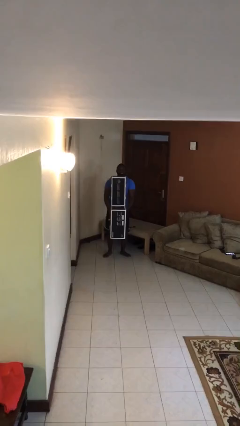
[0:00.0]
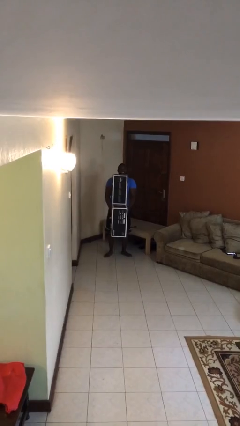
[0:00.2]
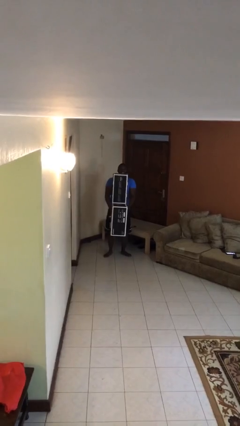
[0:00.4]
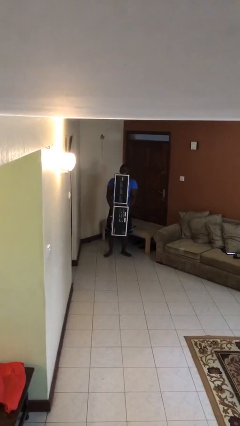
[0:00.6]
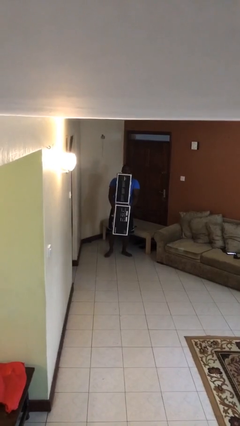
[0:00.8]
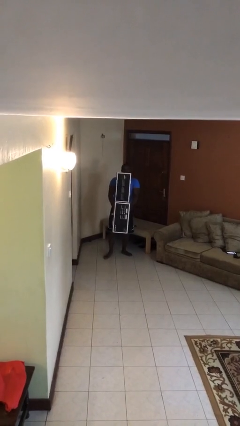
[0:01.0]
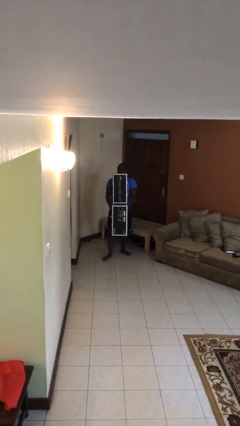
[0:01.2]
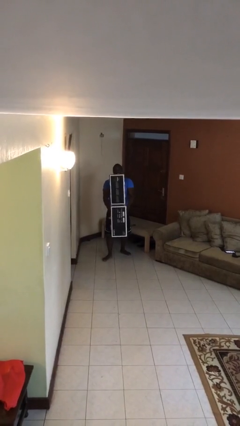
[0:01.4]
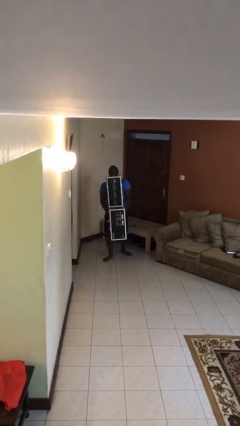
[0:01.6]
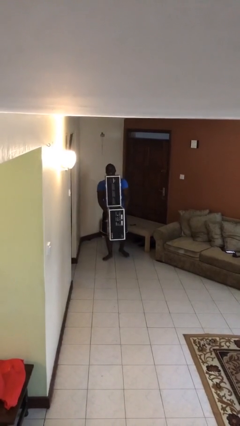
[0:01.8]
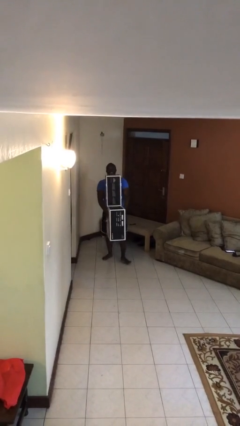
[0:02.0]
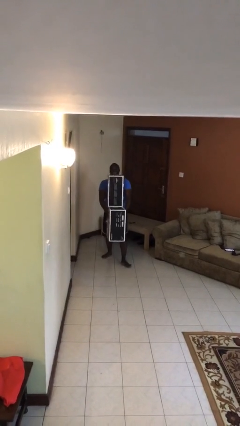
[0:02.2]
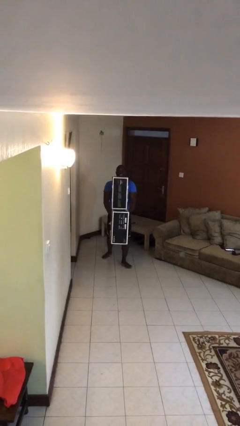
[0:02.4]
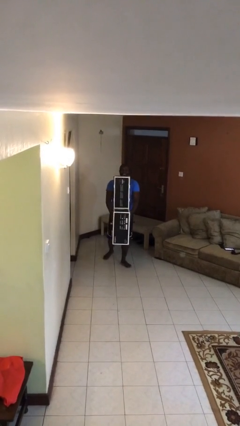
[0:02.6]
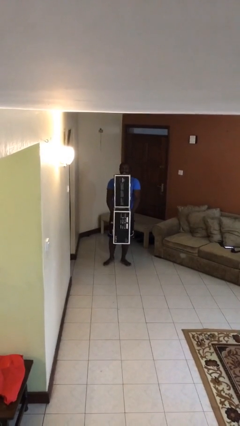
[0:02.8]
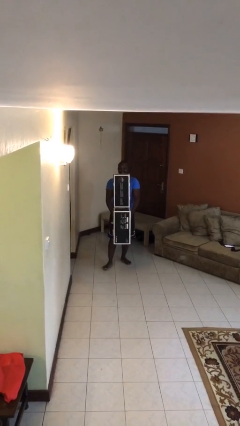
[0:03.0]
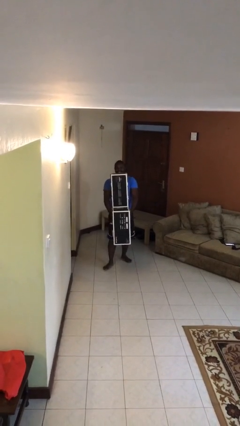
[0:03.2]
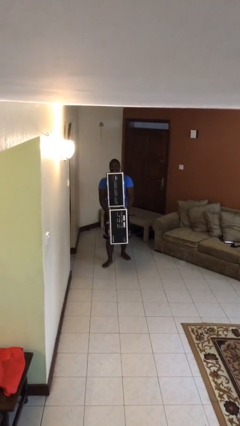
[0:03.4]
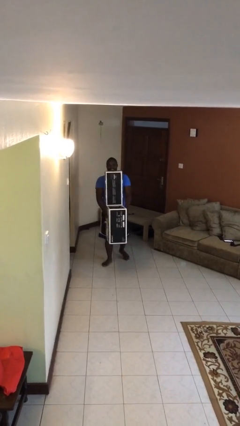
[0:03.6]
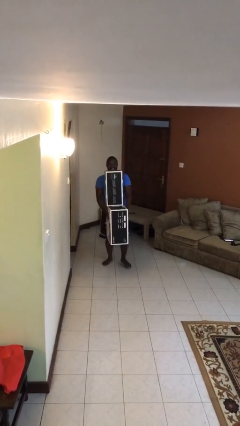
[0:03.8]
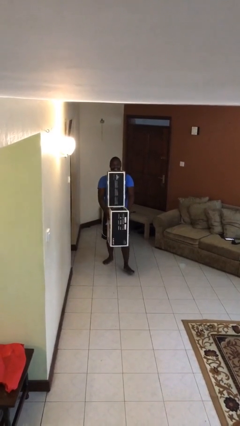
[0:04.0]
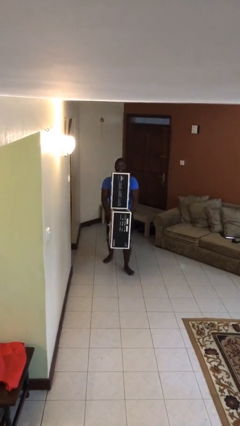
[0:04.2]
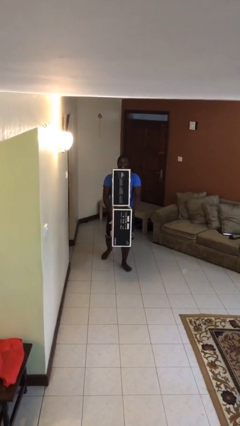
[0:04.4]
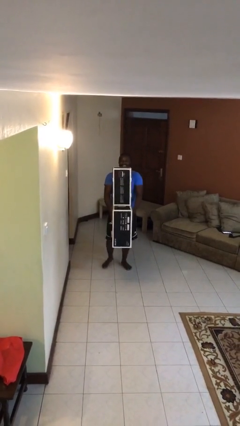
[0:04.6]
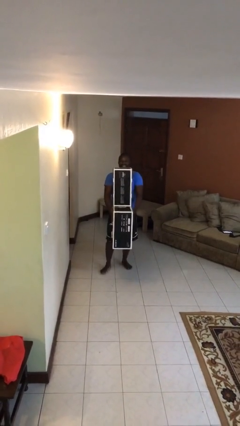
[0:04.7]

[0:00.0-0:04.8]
person carries heavy object

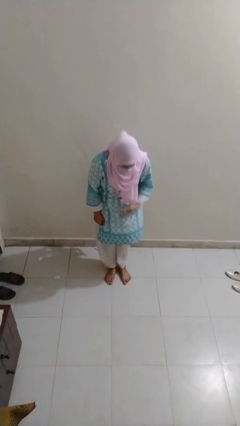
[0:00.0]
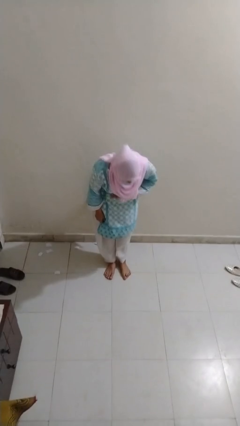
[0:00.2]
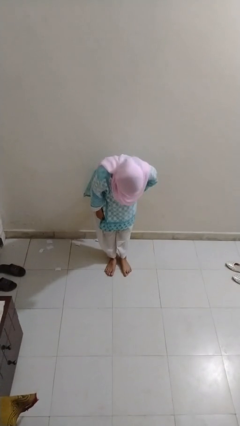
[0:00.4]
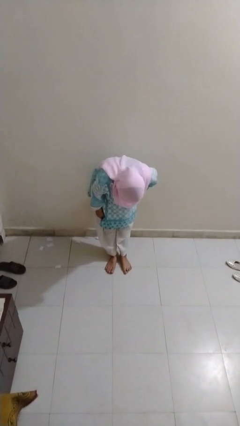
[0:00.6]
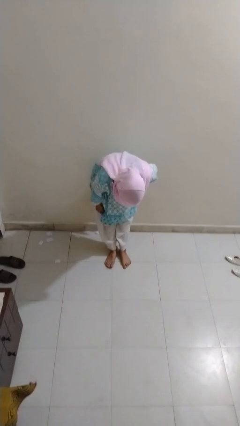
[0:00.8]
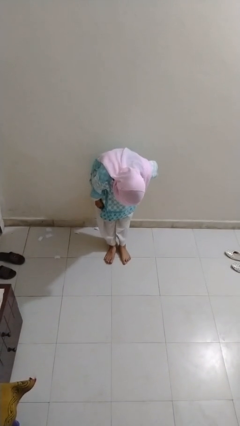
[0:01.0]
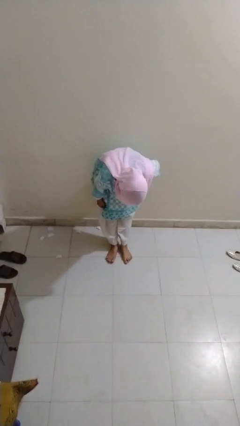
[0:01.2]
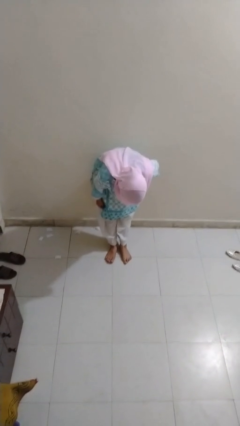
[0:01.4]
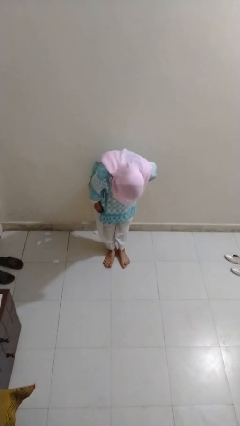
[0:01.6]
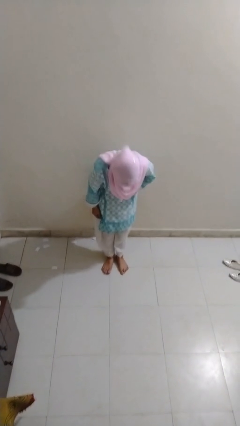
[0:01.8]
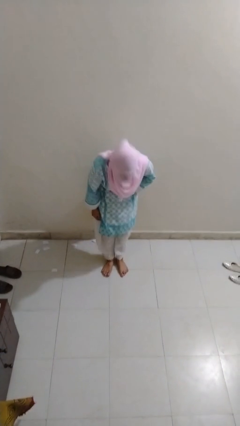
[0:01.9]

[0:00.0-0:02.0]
person bows

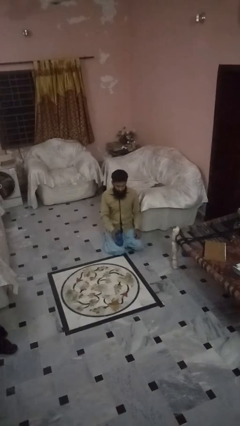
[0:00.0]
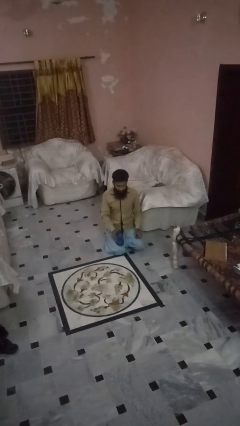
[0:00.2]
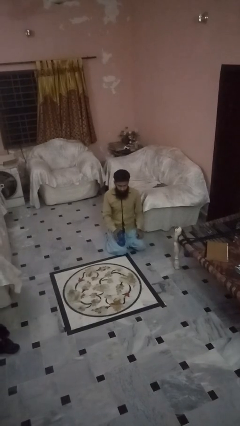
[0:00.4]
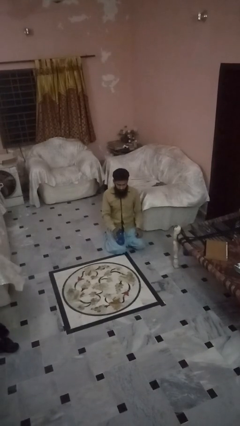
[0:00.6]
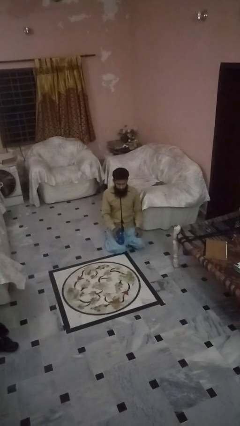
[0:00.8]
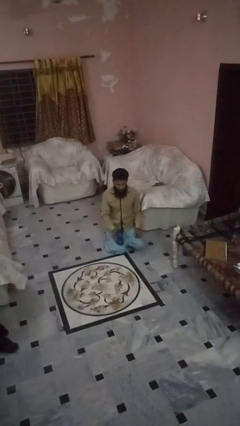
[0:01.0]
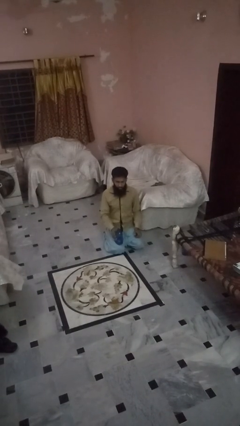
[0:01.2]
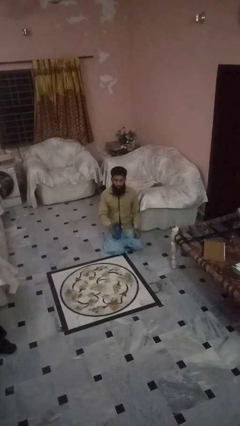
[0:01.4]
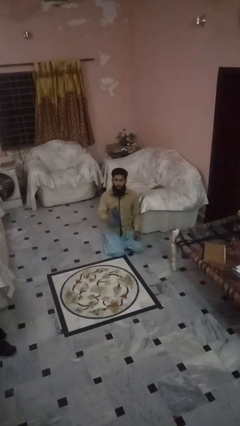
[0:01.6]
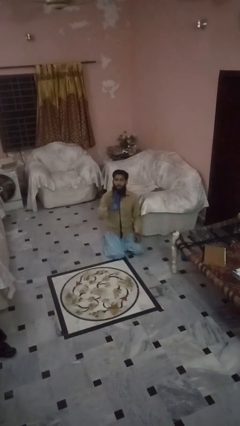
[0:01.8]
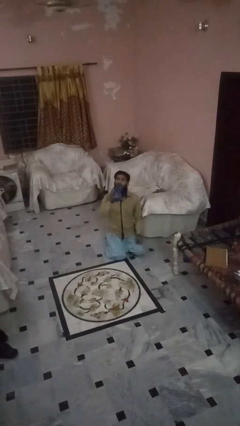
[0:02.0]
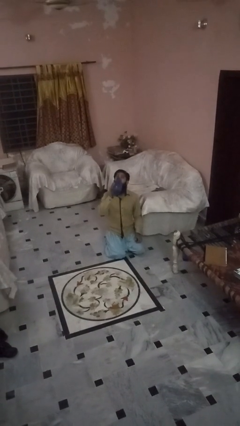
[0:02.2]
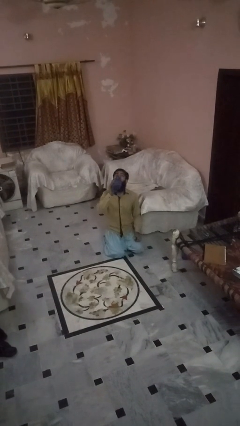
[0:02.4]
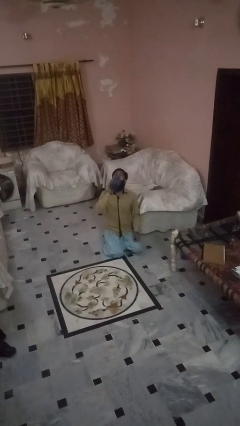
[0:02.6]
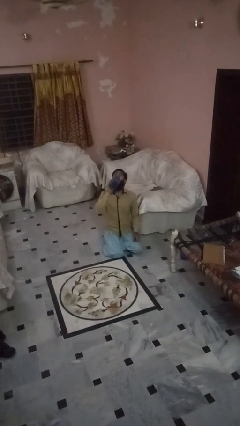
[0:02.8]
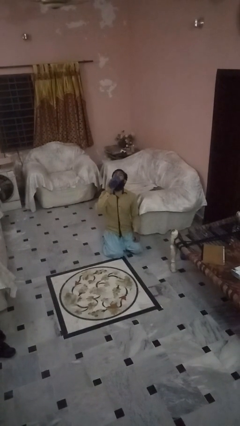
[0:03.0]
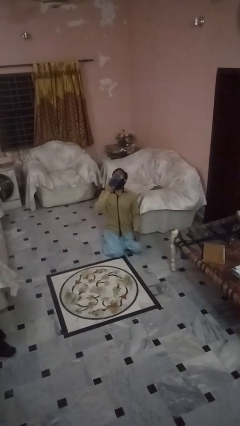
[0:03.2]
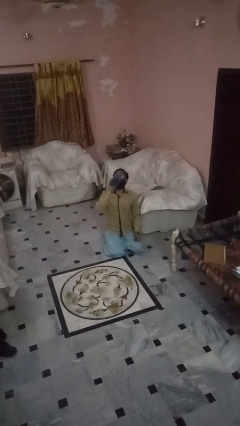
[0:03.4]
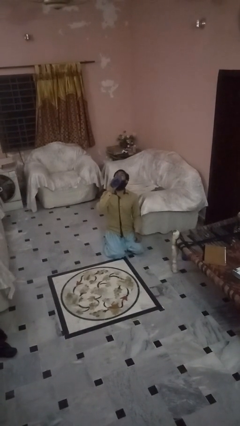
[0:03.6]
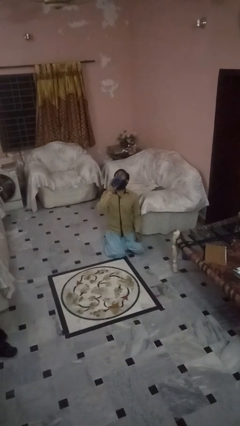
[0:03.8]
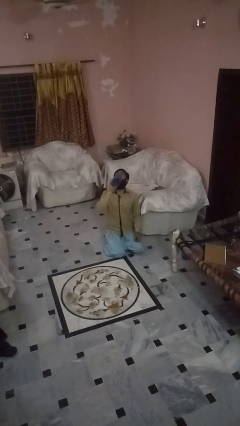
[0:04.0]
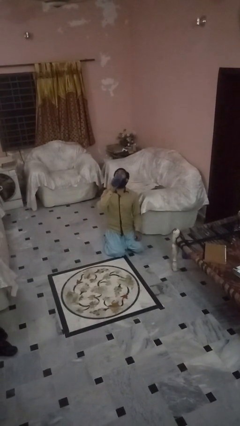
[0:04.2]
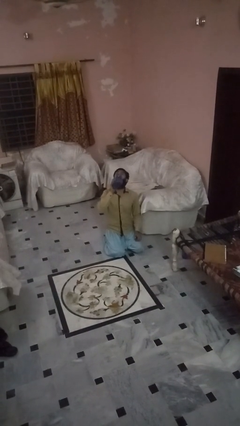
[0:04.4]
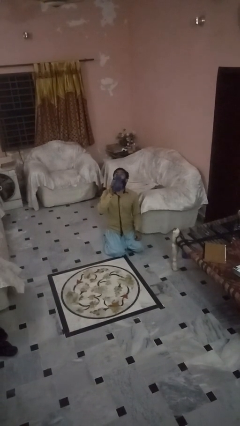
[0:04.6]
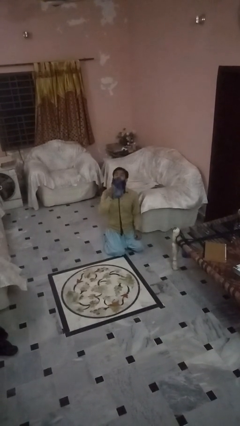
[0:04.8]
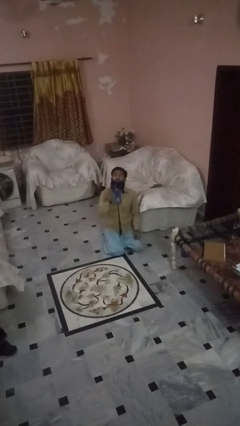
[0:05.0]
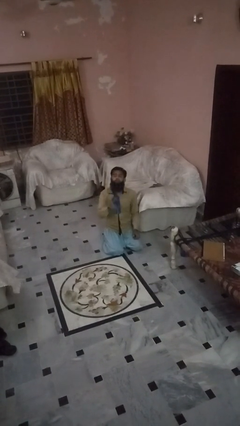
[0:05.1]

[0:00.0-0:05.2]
person drinks from bottle

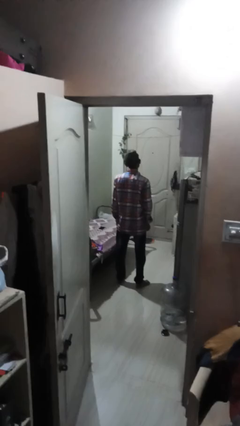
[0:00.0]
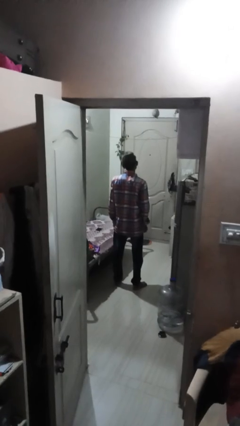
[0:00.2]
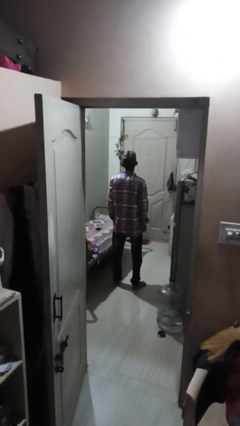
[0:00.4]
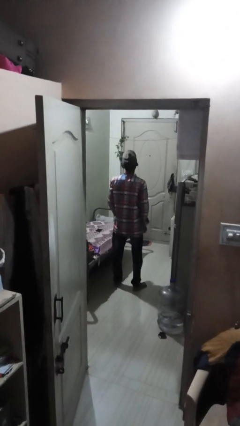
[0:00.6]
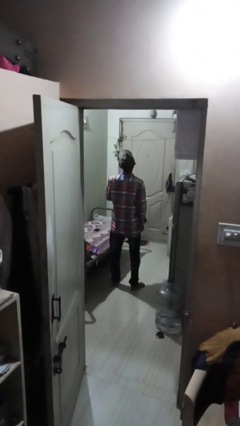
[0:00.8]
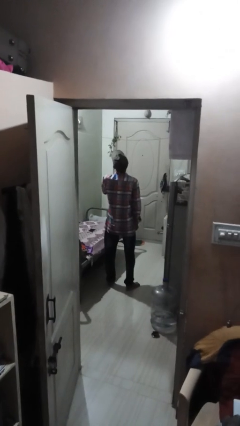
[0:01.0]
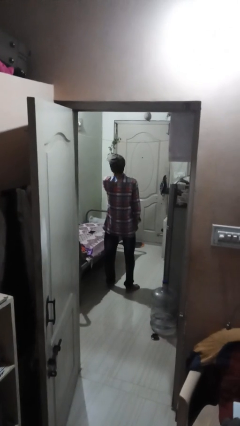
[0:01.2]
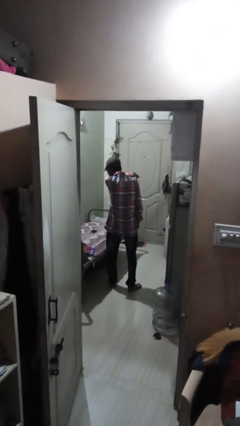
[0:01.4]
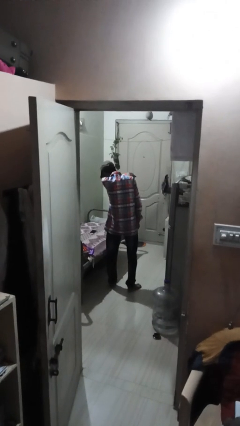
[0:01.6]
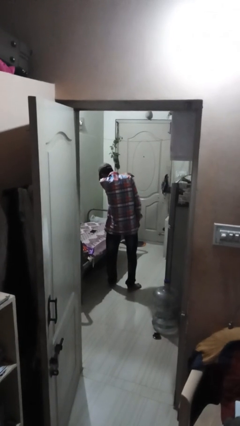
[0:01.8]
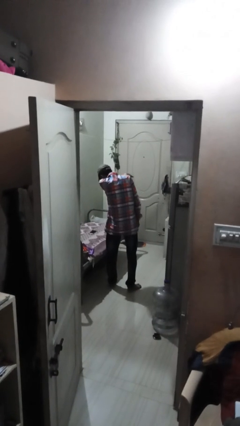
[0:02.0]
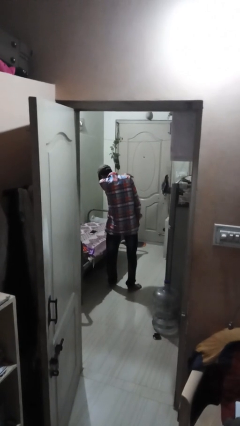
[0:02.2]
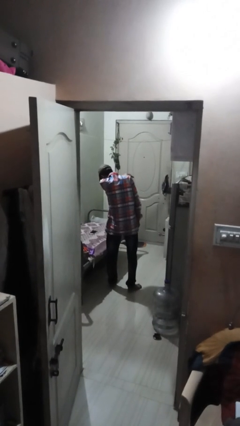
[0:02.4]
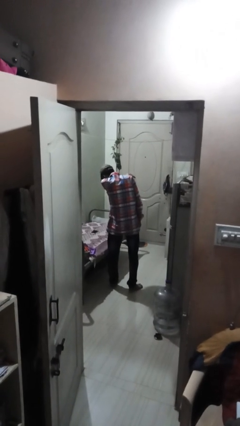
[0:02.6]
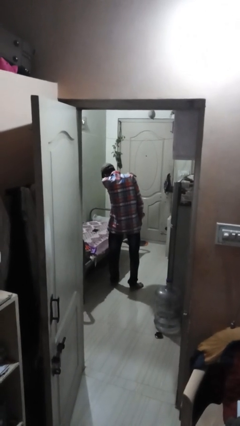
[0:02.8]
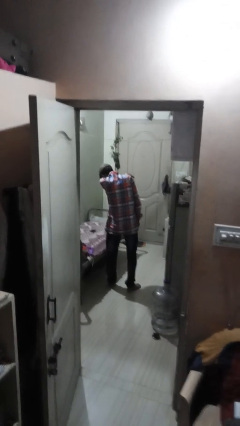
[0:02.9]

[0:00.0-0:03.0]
person sneezes into arm

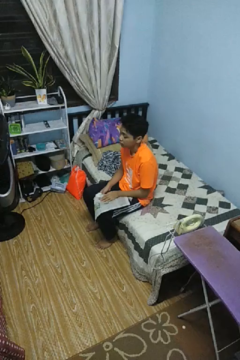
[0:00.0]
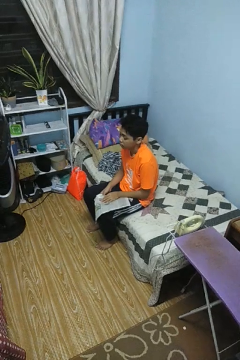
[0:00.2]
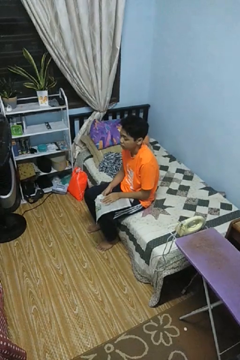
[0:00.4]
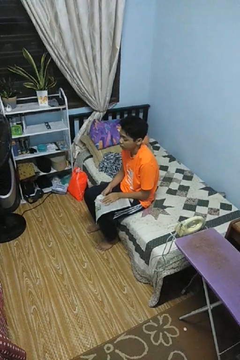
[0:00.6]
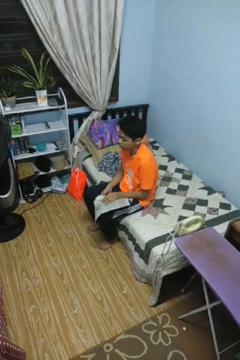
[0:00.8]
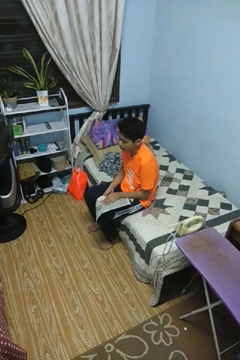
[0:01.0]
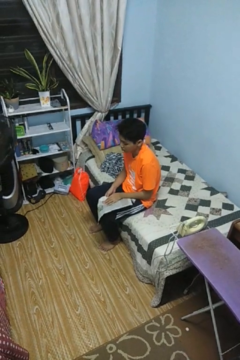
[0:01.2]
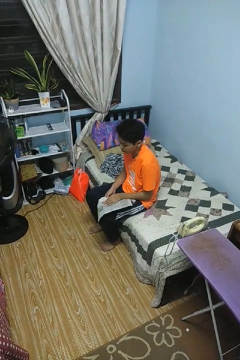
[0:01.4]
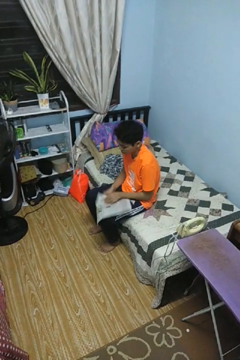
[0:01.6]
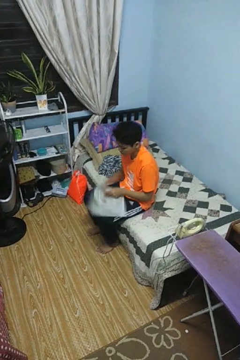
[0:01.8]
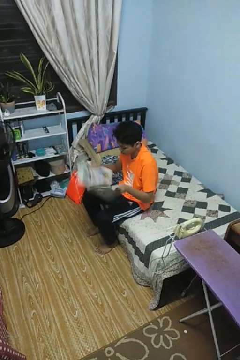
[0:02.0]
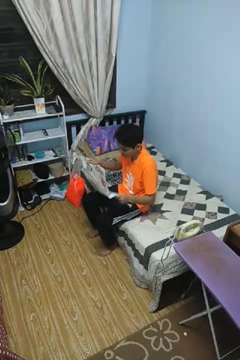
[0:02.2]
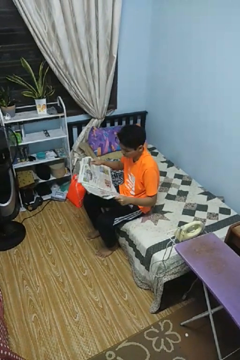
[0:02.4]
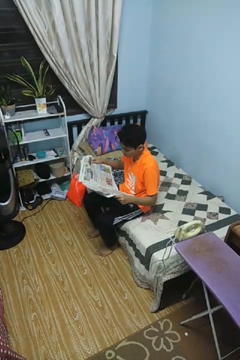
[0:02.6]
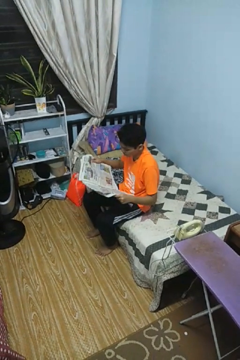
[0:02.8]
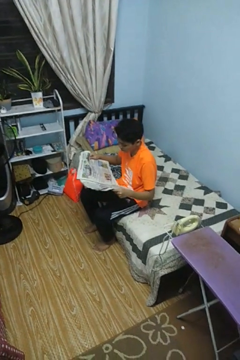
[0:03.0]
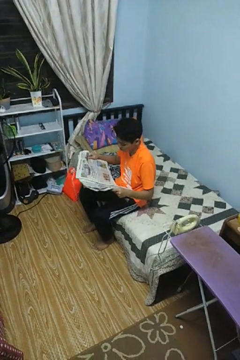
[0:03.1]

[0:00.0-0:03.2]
person reads newspaper
